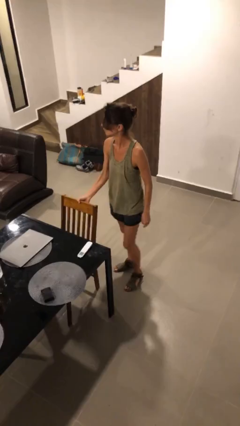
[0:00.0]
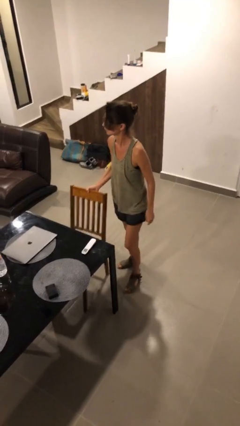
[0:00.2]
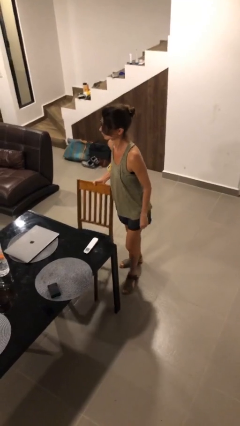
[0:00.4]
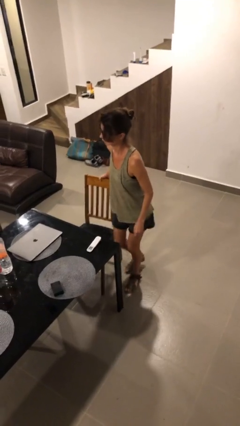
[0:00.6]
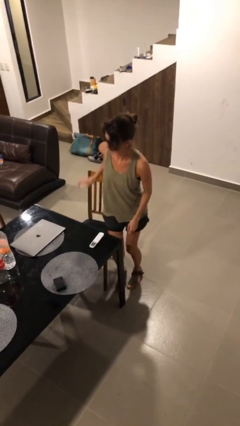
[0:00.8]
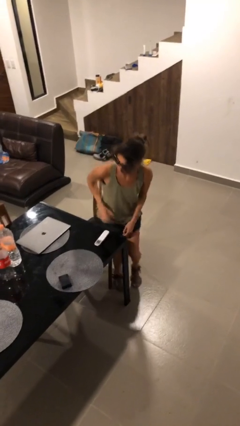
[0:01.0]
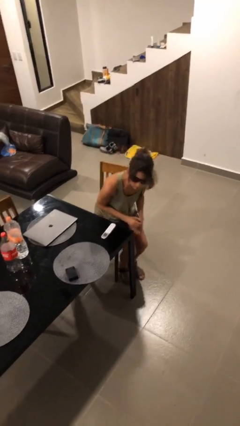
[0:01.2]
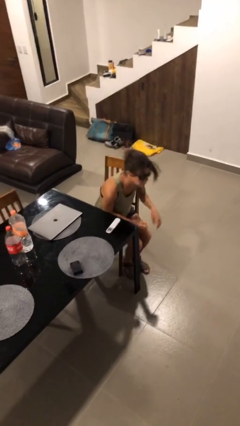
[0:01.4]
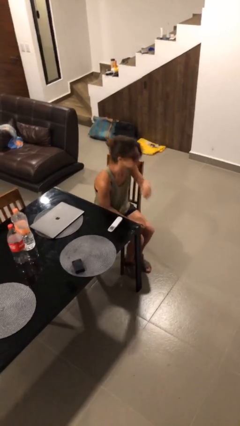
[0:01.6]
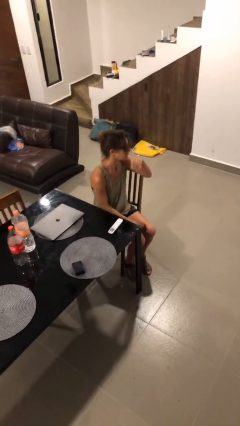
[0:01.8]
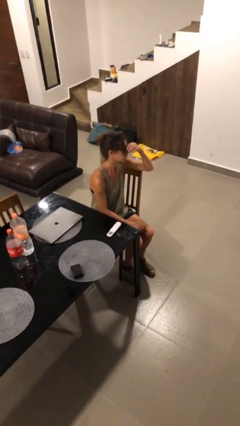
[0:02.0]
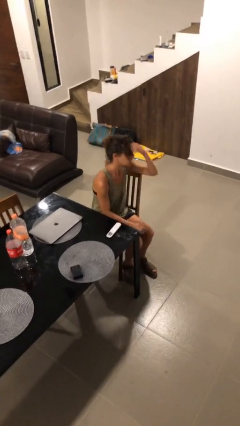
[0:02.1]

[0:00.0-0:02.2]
person sits down

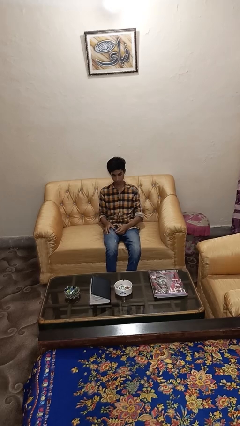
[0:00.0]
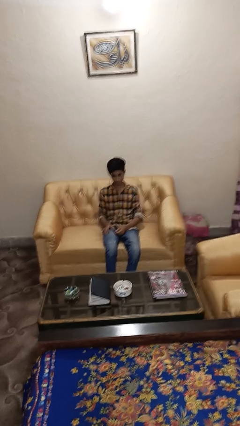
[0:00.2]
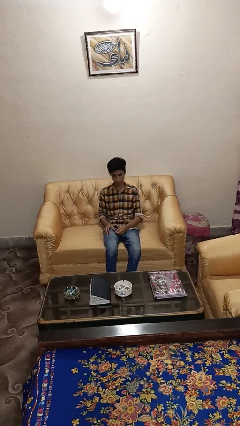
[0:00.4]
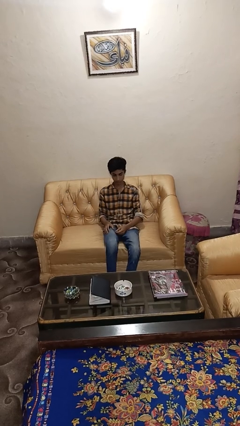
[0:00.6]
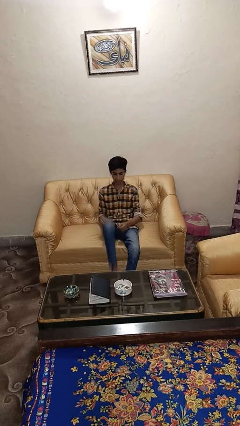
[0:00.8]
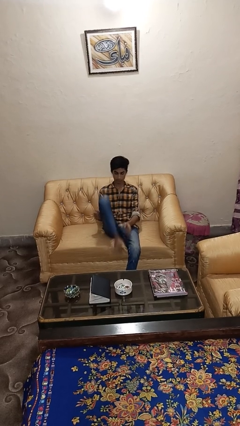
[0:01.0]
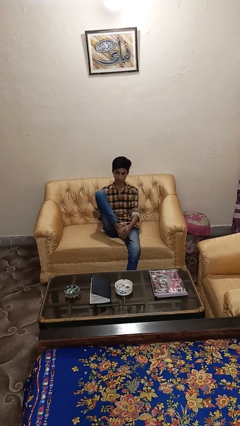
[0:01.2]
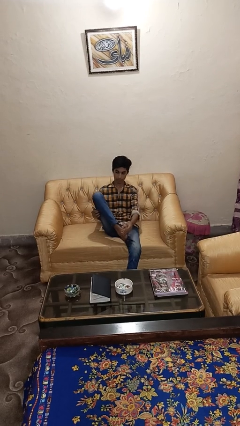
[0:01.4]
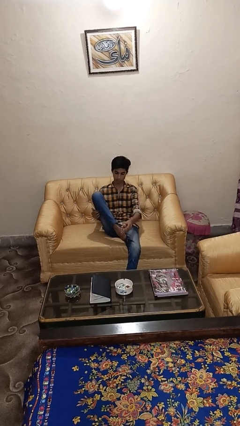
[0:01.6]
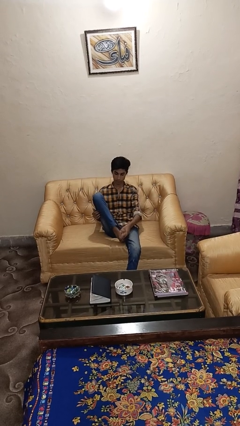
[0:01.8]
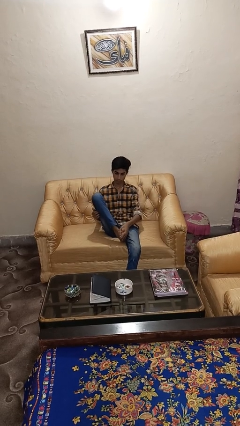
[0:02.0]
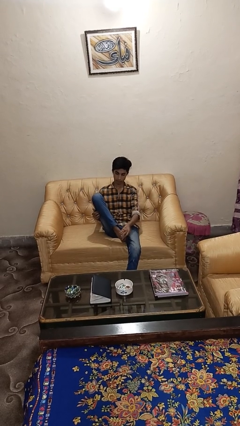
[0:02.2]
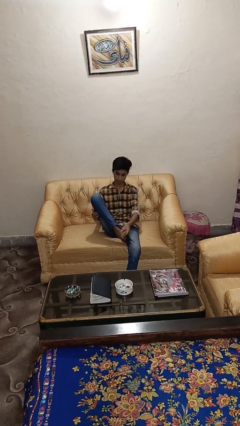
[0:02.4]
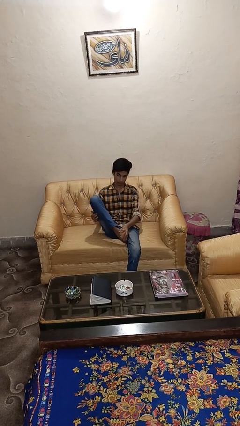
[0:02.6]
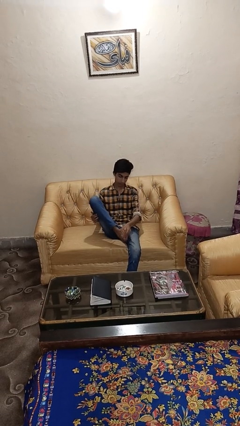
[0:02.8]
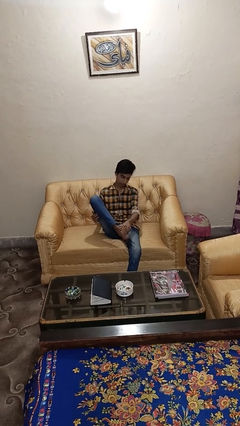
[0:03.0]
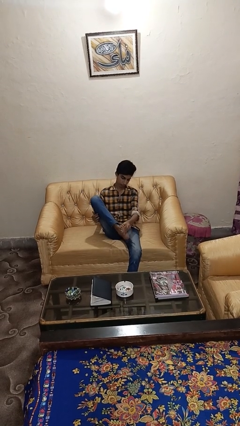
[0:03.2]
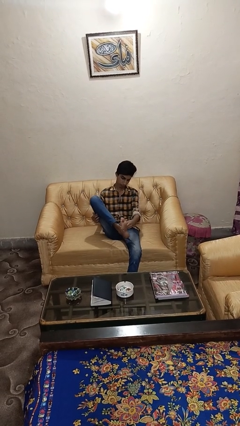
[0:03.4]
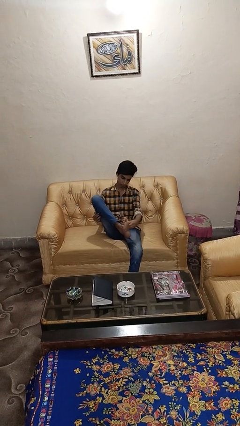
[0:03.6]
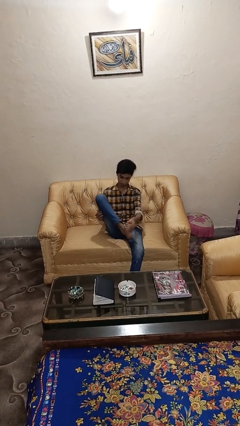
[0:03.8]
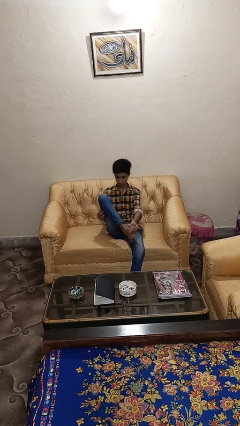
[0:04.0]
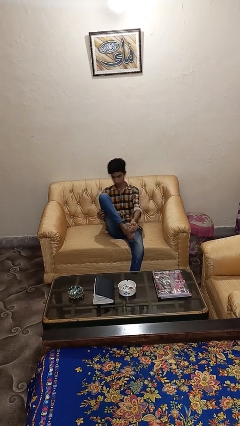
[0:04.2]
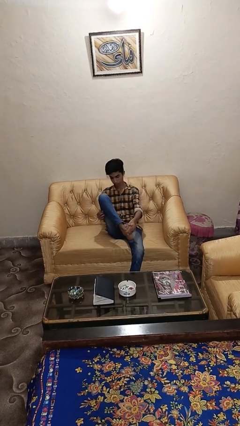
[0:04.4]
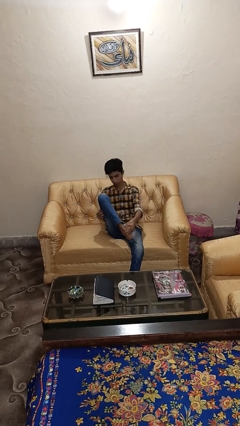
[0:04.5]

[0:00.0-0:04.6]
person rubs foot

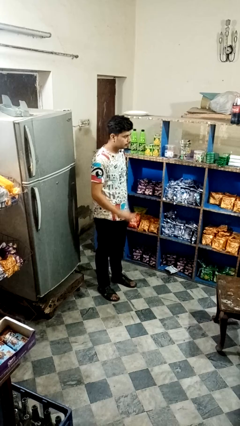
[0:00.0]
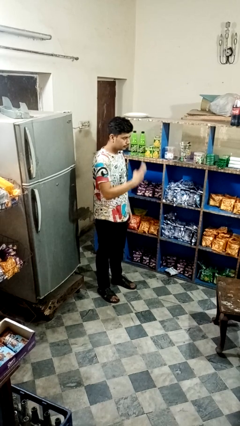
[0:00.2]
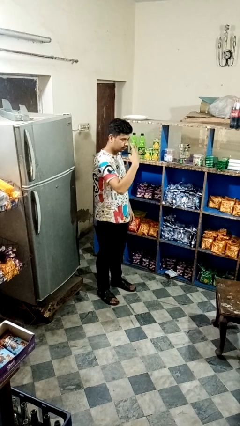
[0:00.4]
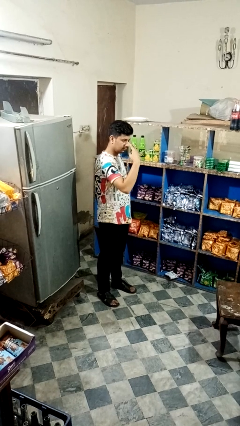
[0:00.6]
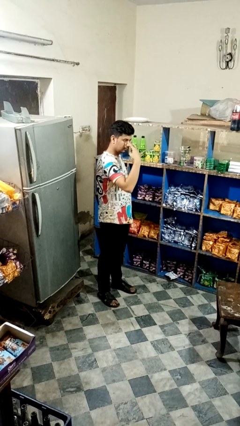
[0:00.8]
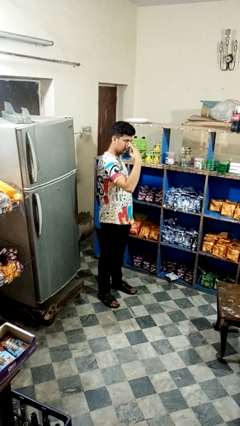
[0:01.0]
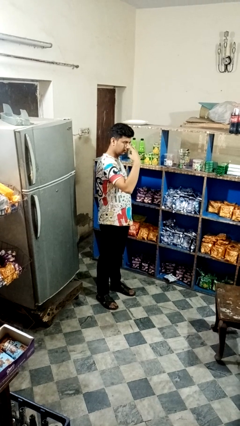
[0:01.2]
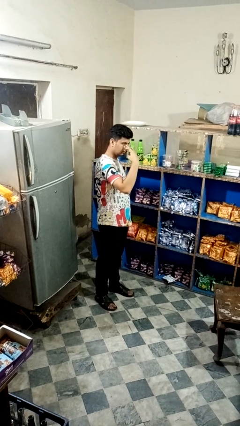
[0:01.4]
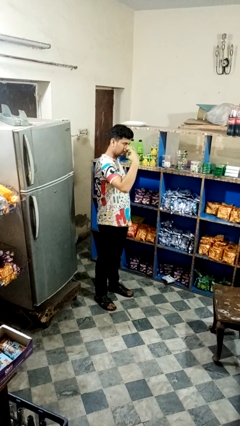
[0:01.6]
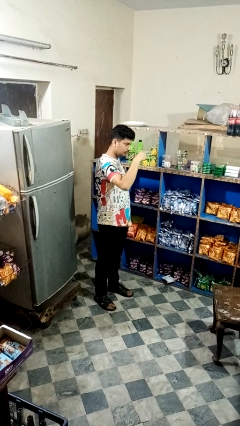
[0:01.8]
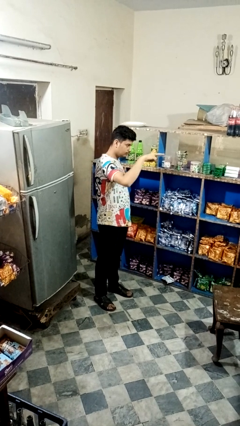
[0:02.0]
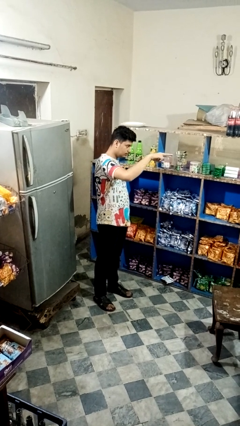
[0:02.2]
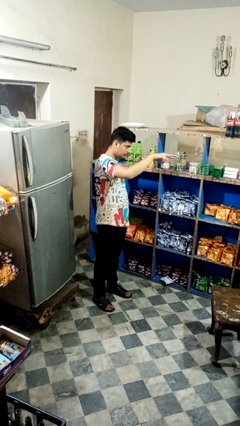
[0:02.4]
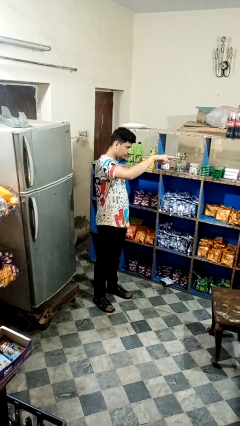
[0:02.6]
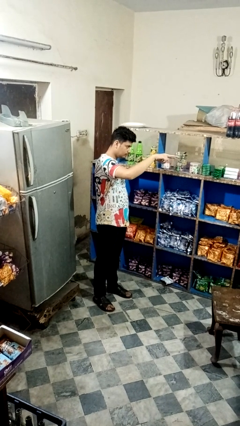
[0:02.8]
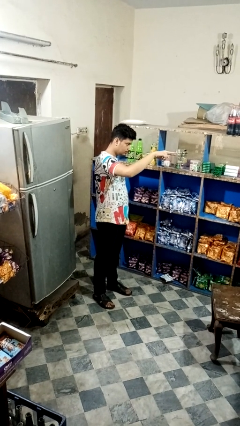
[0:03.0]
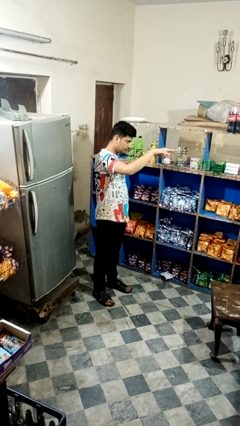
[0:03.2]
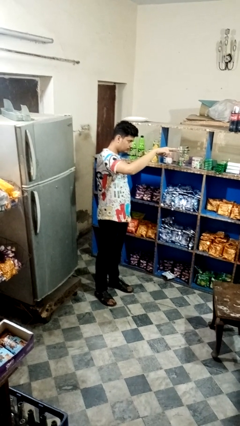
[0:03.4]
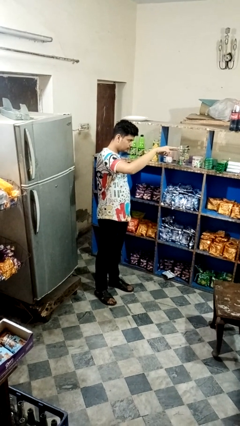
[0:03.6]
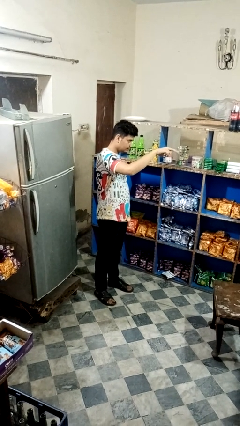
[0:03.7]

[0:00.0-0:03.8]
person gestures watch closely

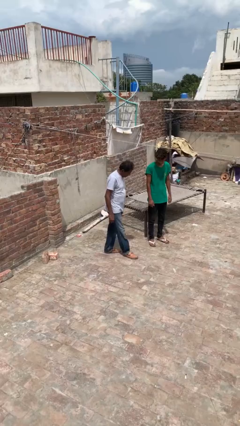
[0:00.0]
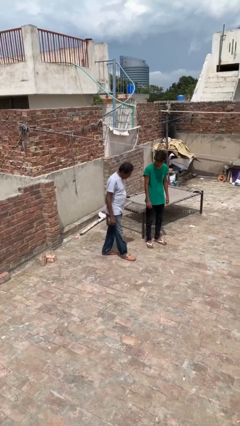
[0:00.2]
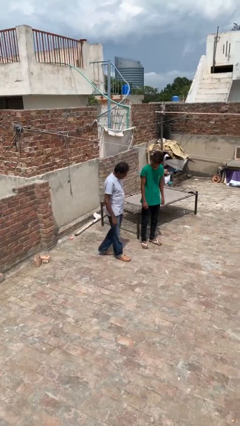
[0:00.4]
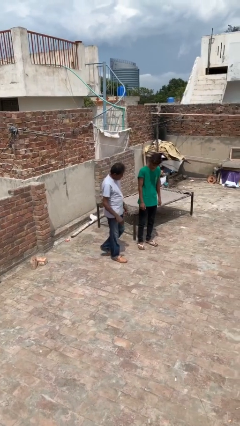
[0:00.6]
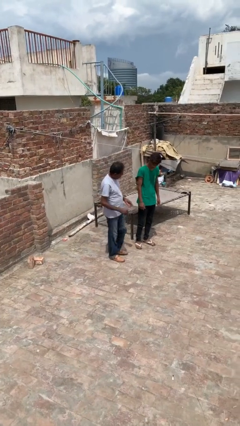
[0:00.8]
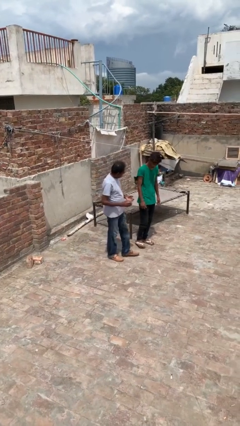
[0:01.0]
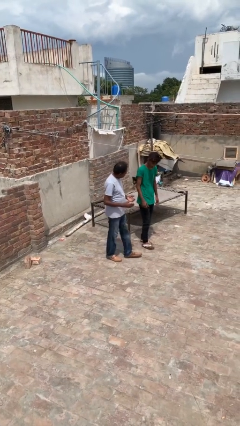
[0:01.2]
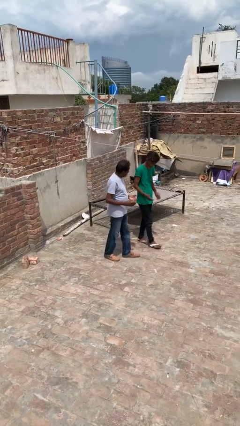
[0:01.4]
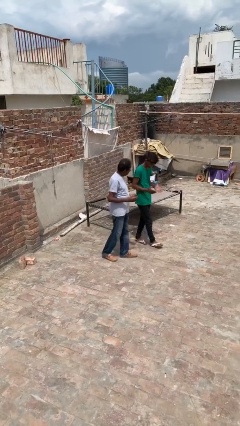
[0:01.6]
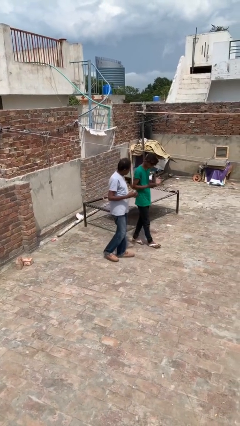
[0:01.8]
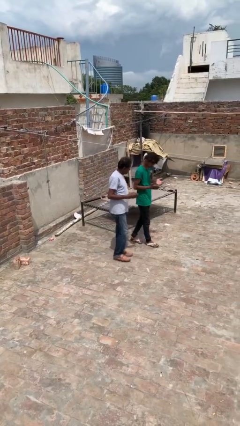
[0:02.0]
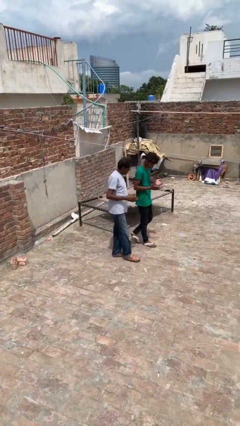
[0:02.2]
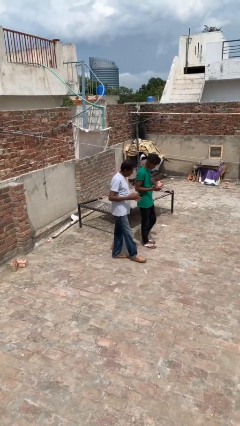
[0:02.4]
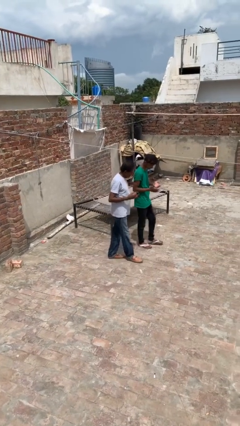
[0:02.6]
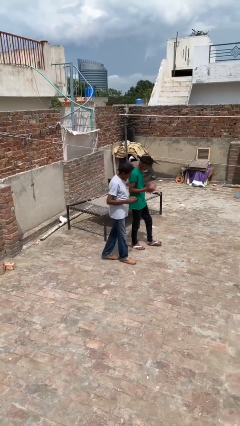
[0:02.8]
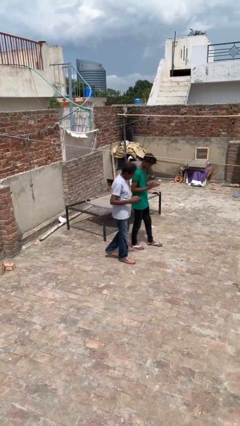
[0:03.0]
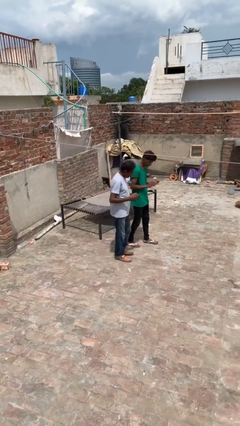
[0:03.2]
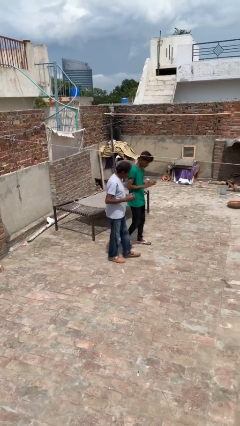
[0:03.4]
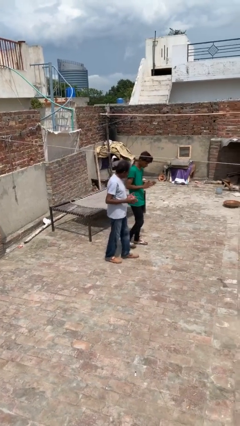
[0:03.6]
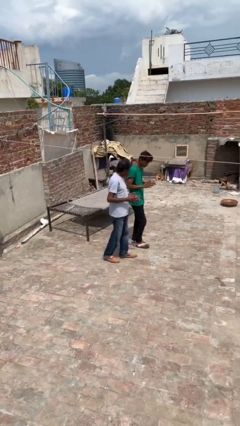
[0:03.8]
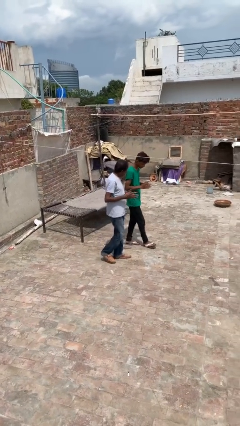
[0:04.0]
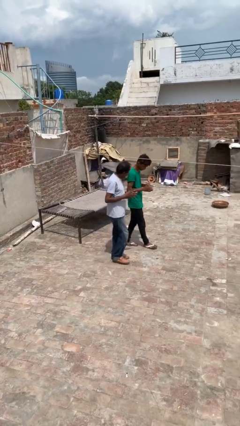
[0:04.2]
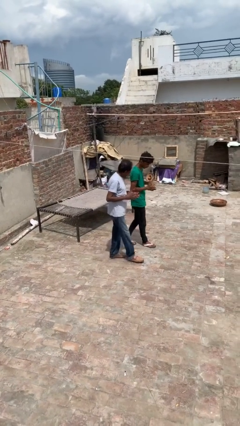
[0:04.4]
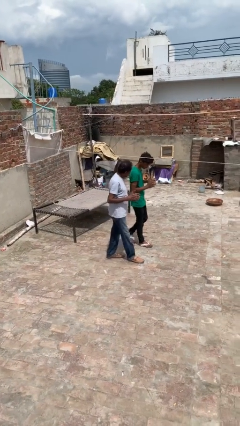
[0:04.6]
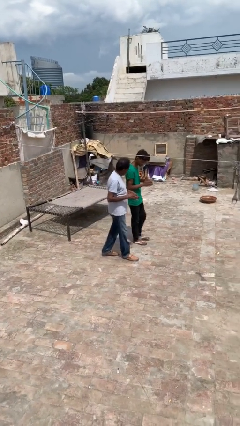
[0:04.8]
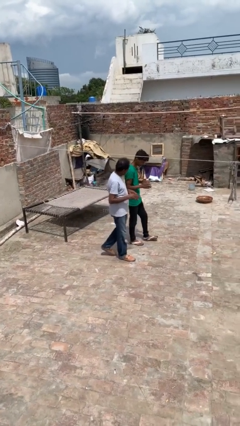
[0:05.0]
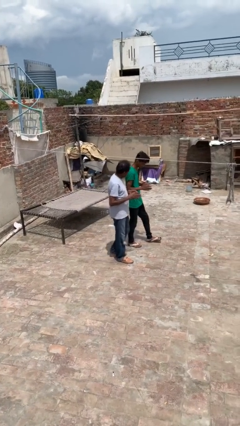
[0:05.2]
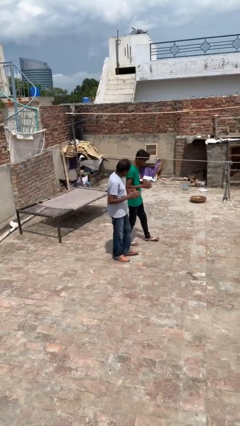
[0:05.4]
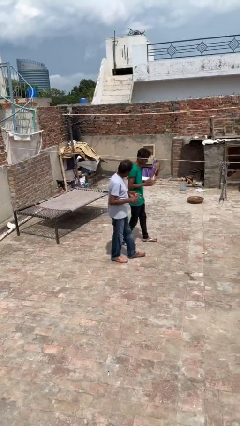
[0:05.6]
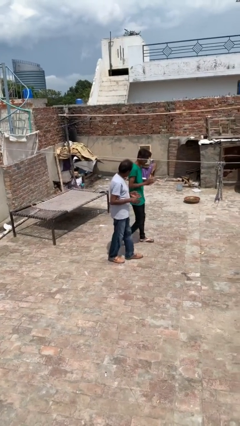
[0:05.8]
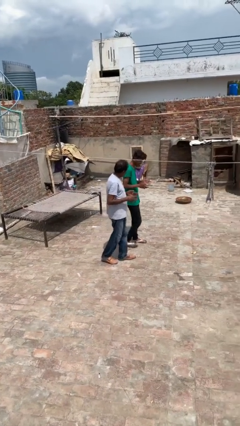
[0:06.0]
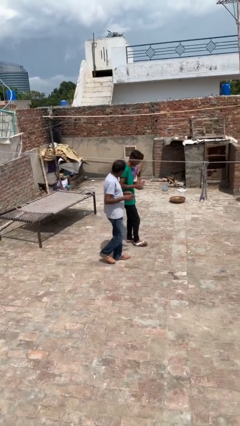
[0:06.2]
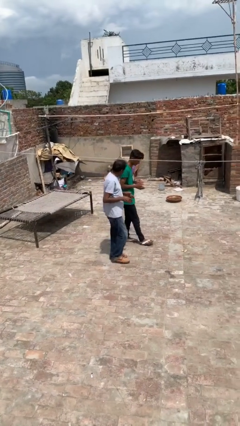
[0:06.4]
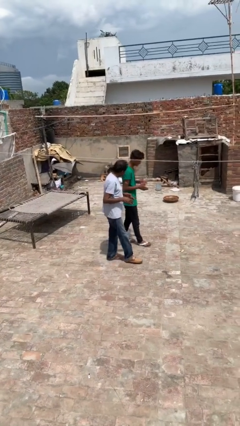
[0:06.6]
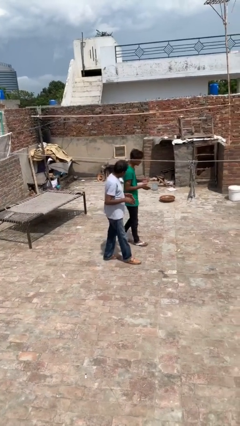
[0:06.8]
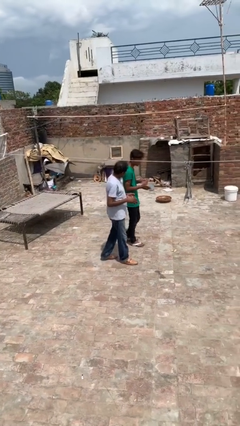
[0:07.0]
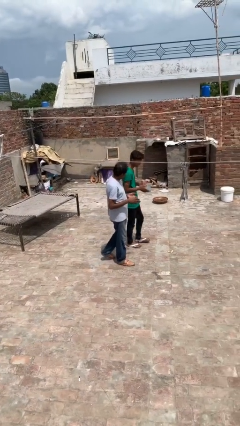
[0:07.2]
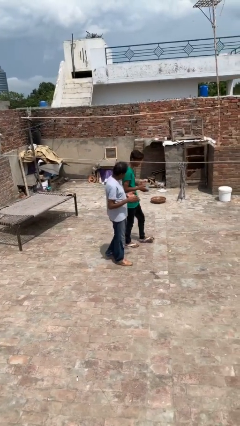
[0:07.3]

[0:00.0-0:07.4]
person talks to person
